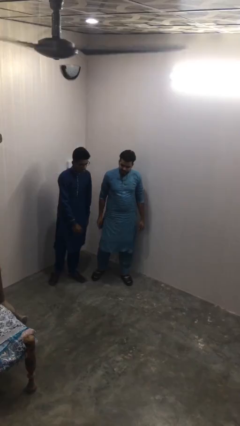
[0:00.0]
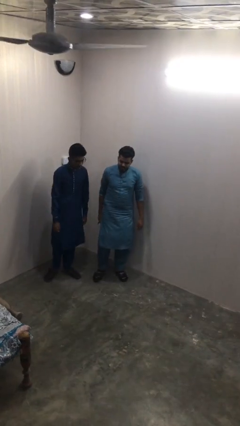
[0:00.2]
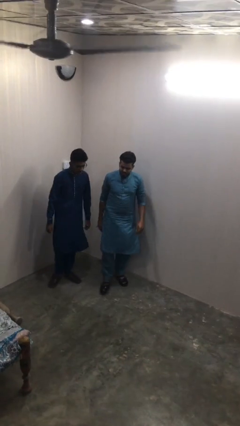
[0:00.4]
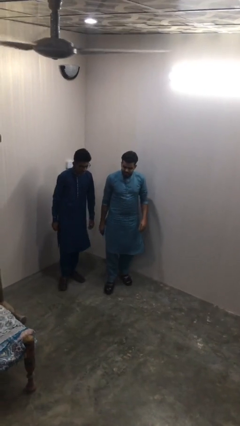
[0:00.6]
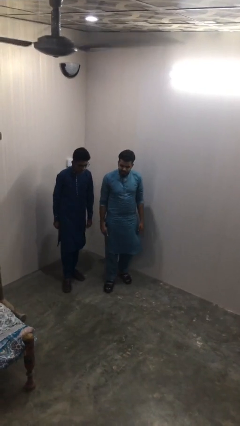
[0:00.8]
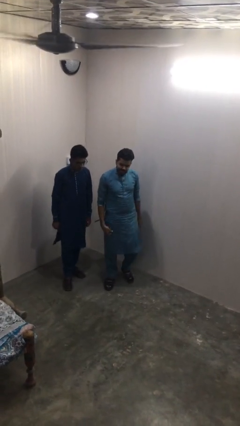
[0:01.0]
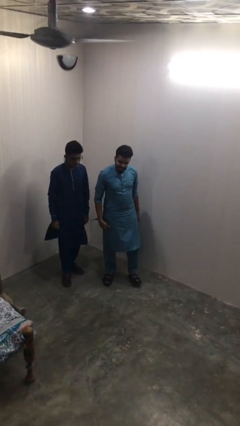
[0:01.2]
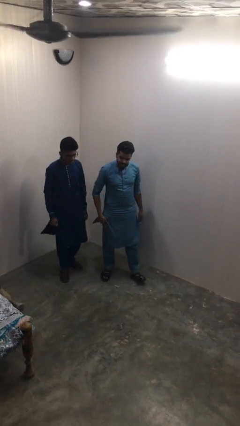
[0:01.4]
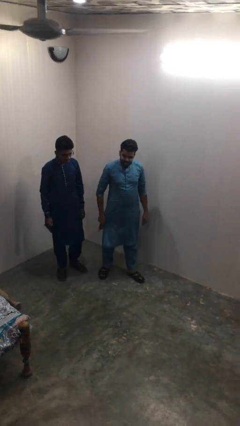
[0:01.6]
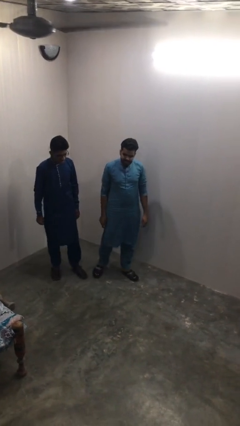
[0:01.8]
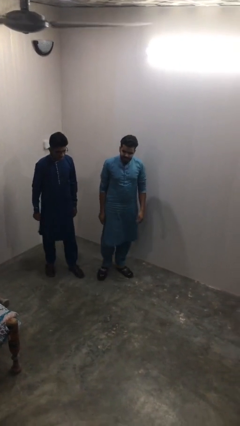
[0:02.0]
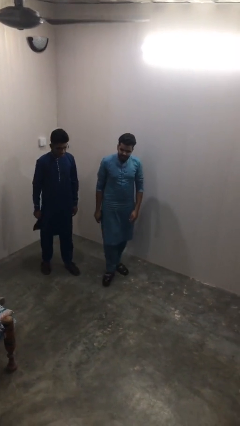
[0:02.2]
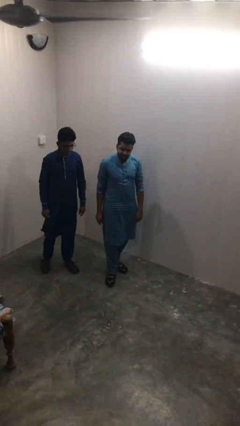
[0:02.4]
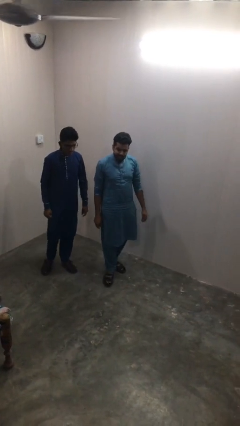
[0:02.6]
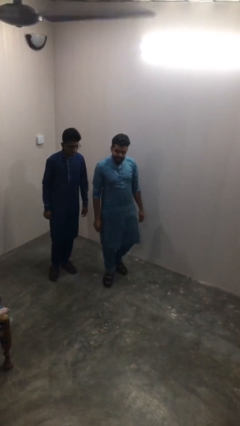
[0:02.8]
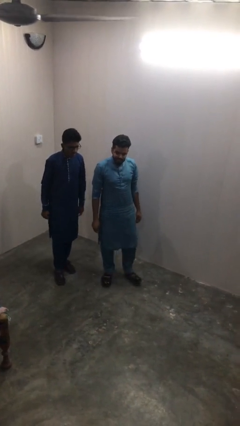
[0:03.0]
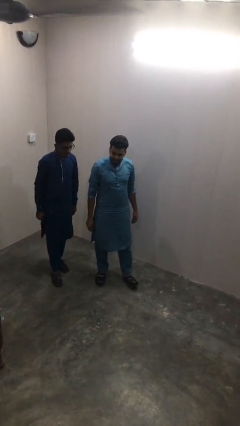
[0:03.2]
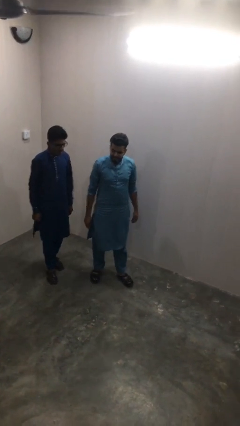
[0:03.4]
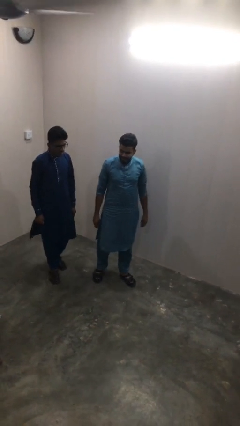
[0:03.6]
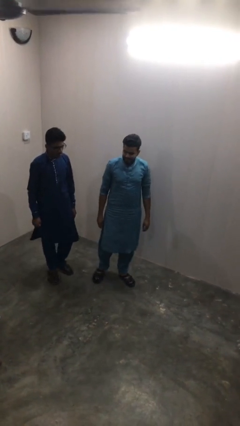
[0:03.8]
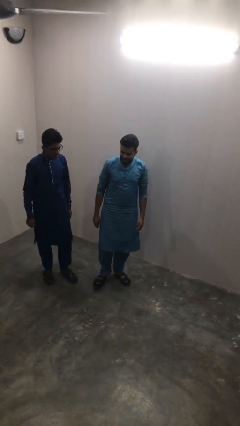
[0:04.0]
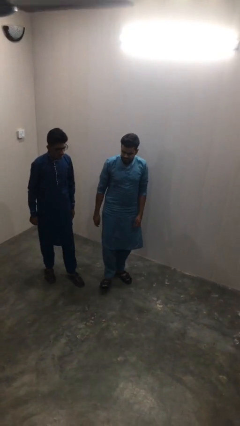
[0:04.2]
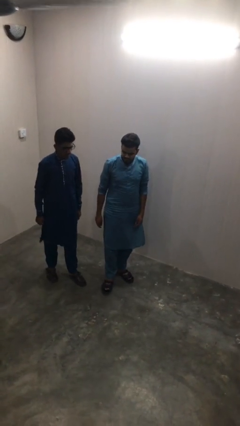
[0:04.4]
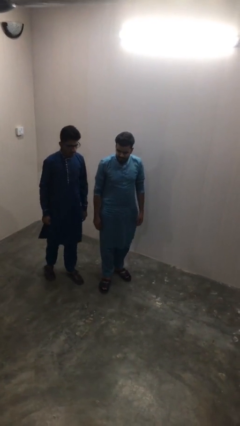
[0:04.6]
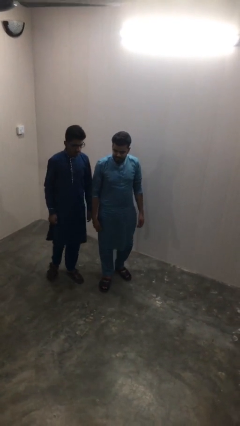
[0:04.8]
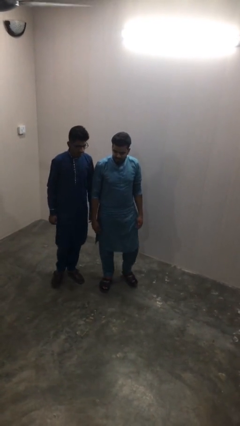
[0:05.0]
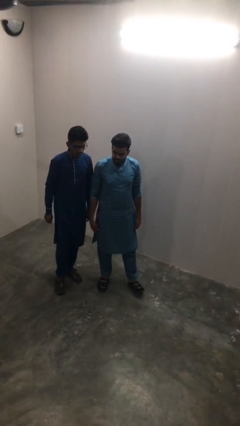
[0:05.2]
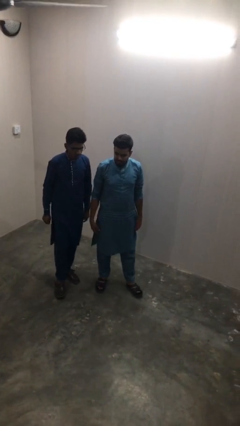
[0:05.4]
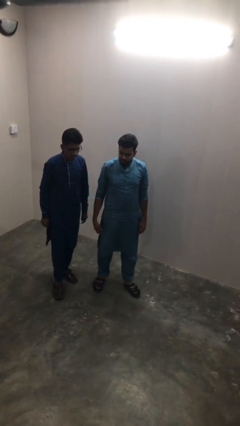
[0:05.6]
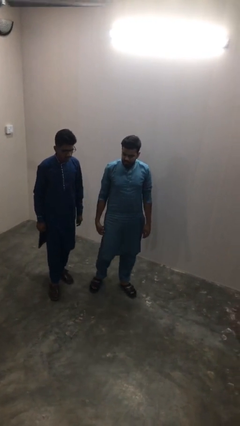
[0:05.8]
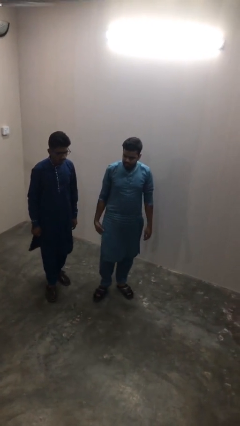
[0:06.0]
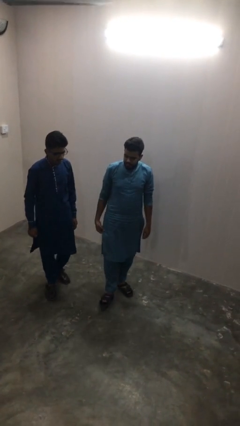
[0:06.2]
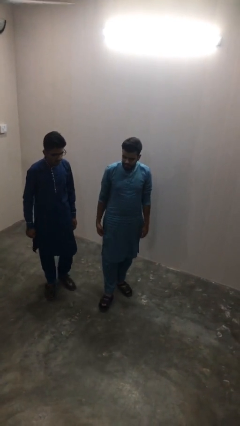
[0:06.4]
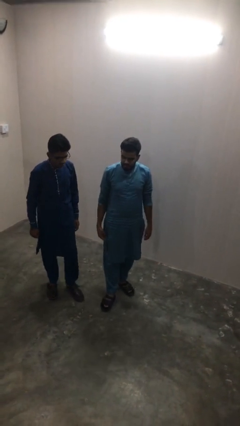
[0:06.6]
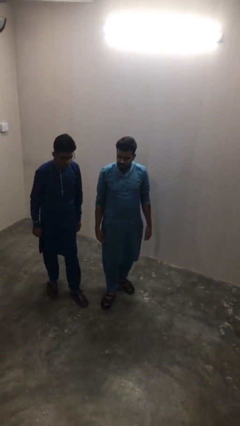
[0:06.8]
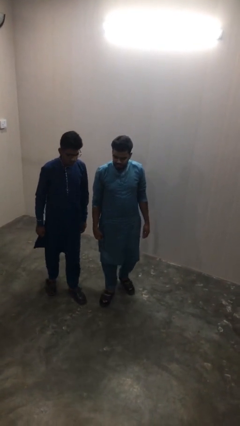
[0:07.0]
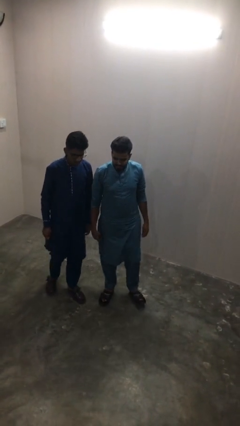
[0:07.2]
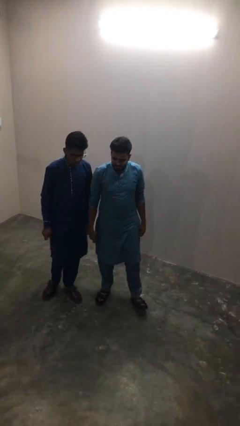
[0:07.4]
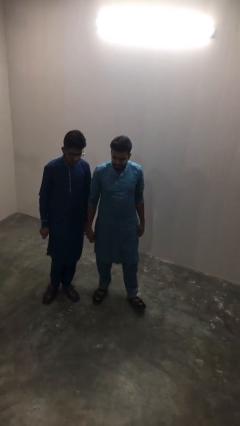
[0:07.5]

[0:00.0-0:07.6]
person talks to person

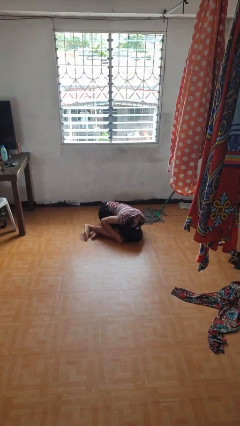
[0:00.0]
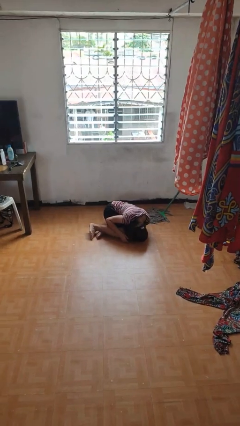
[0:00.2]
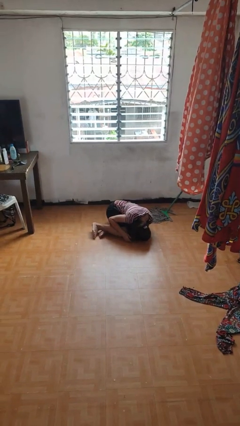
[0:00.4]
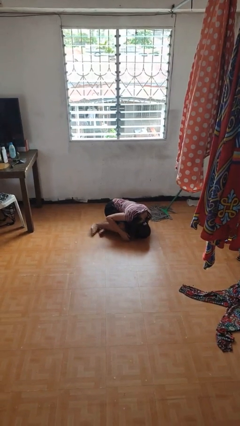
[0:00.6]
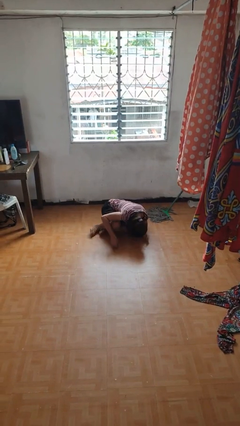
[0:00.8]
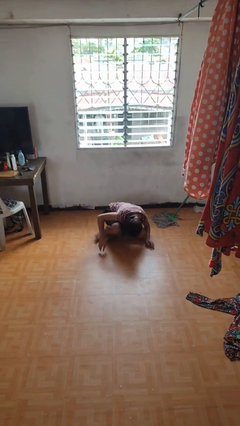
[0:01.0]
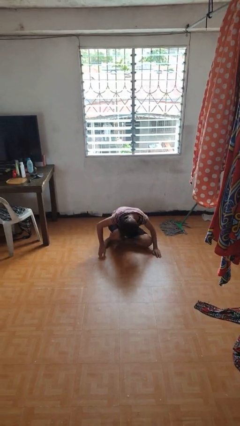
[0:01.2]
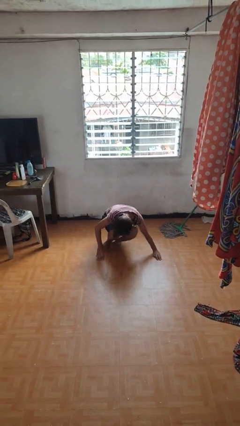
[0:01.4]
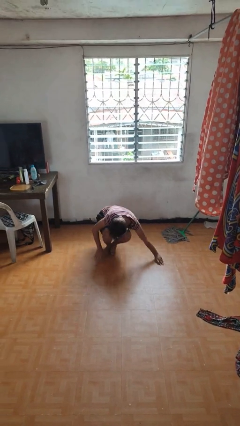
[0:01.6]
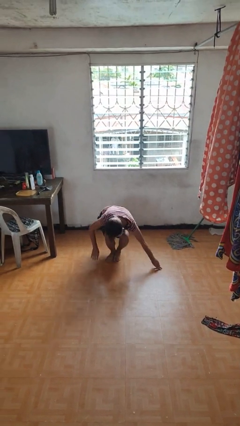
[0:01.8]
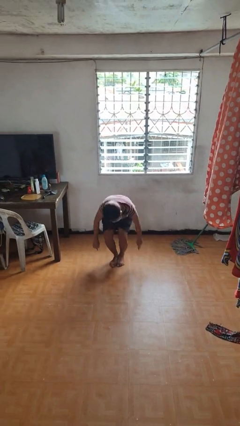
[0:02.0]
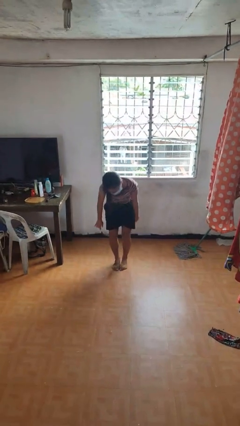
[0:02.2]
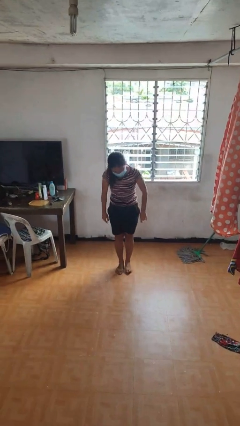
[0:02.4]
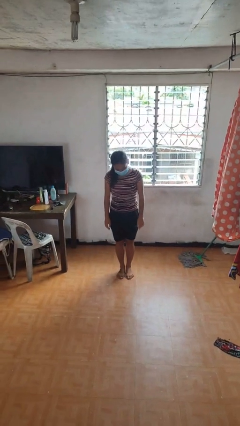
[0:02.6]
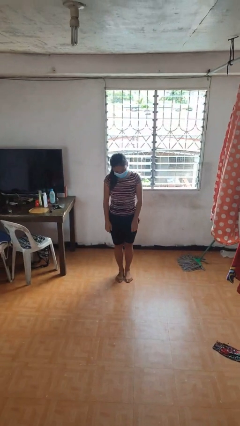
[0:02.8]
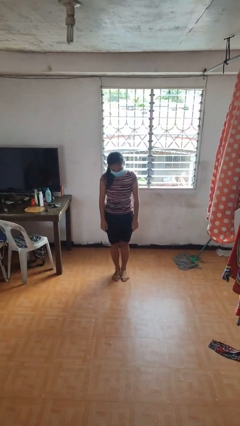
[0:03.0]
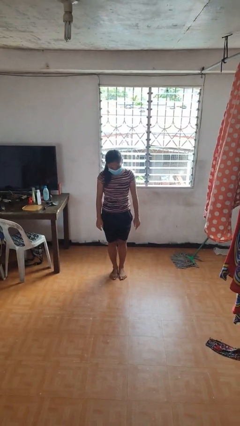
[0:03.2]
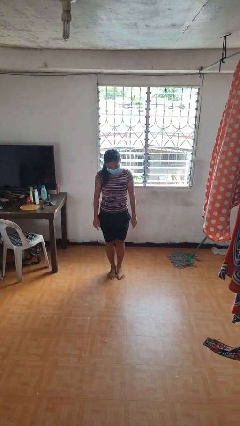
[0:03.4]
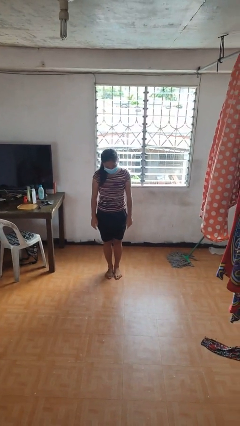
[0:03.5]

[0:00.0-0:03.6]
person stands up from floor

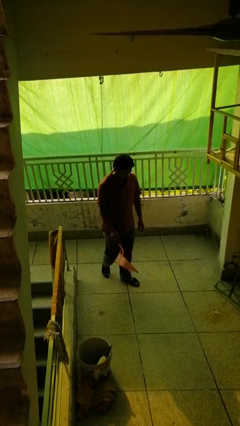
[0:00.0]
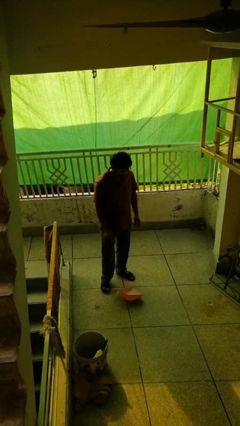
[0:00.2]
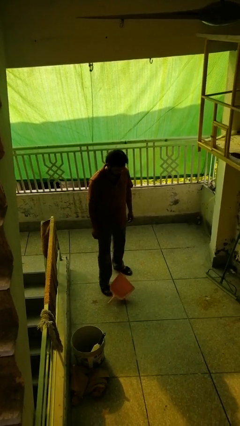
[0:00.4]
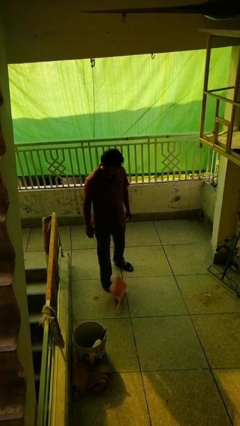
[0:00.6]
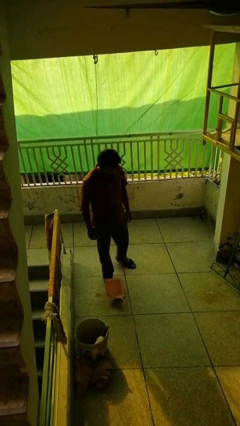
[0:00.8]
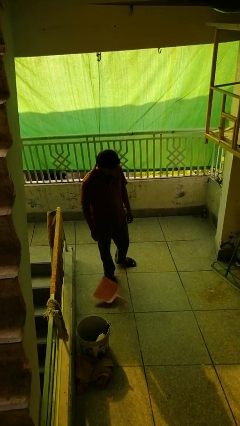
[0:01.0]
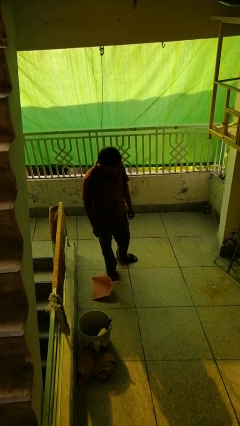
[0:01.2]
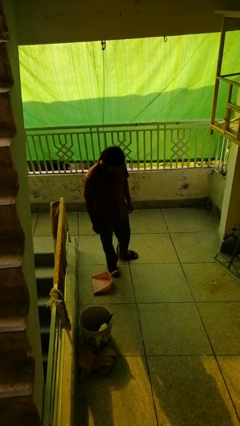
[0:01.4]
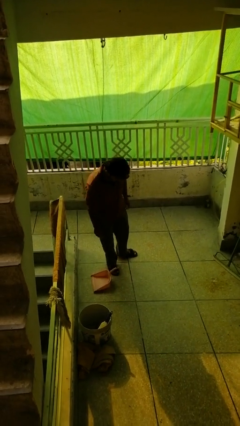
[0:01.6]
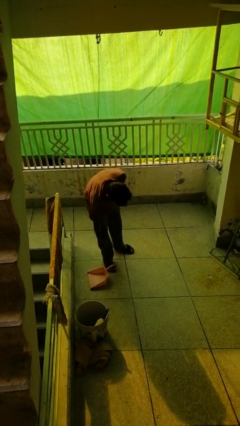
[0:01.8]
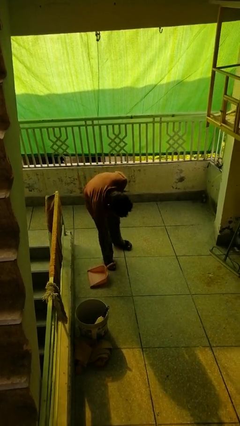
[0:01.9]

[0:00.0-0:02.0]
person drops object

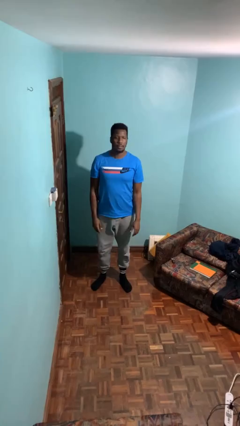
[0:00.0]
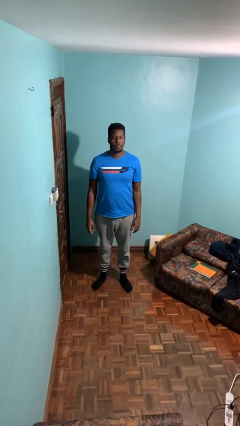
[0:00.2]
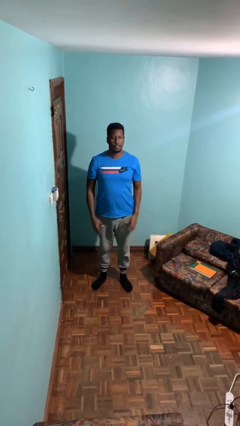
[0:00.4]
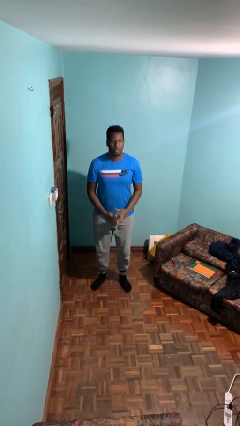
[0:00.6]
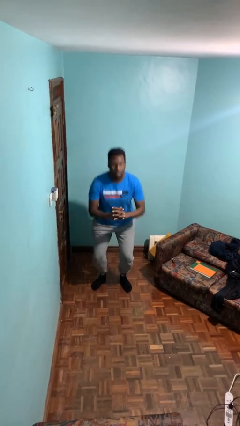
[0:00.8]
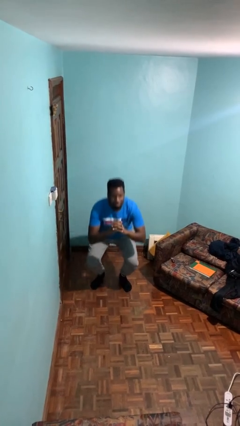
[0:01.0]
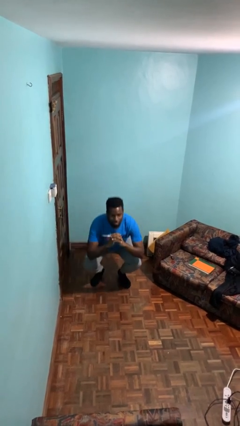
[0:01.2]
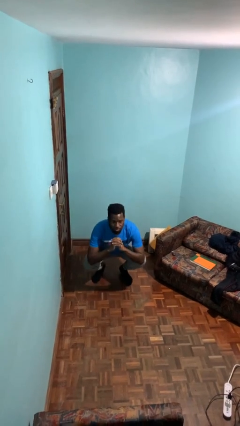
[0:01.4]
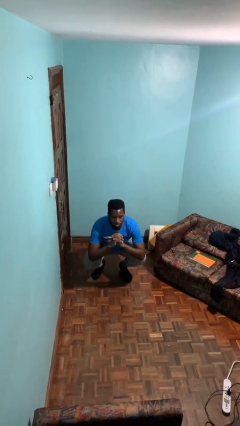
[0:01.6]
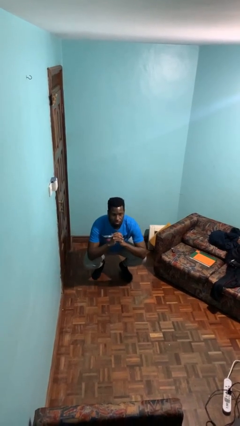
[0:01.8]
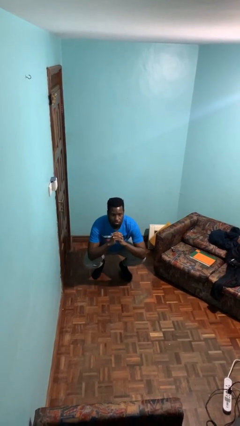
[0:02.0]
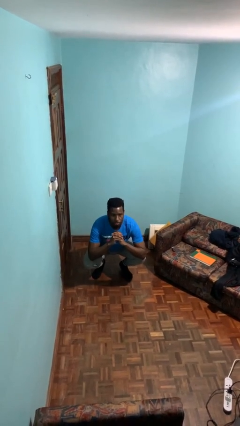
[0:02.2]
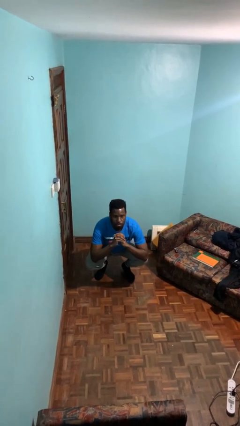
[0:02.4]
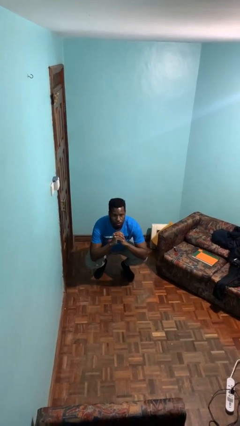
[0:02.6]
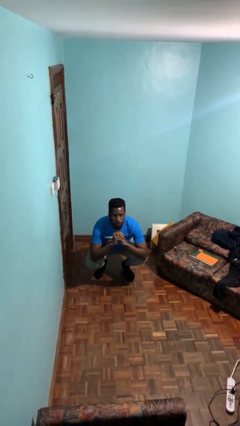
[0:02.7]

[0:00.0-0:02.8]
person squats

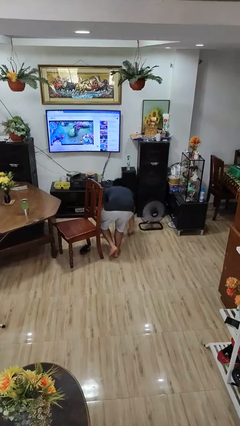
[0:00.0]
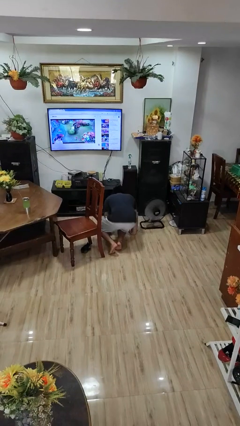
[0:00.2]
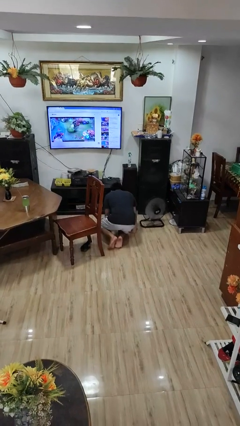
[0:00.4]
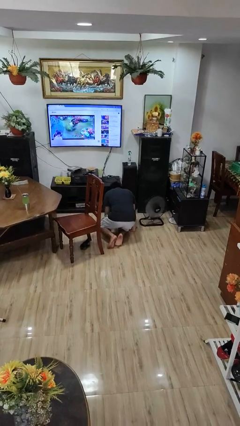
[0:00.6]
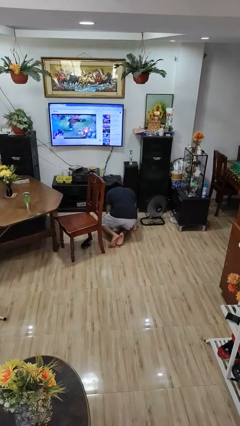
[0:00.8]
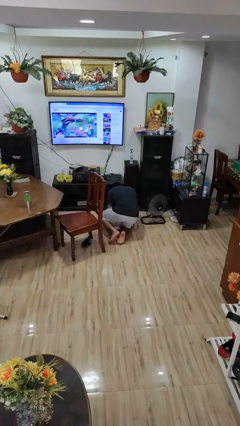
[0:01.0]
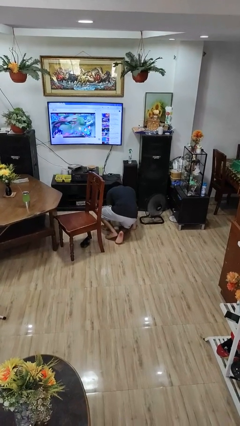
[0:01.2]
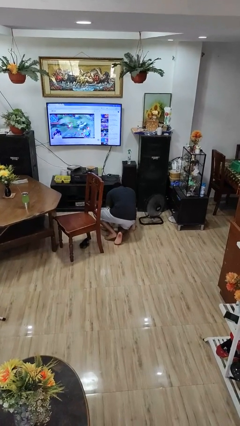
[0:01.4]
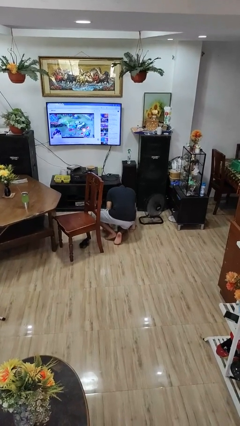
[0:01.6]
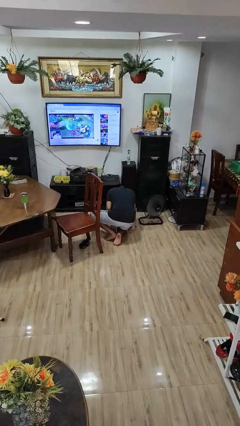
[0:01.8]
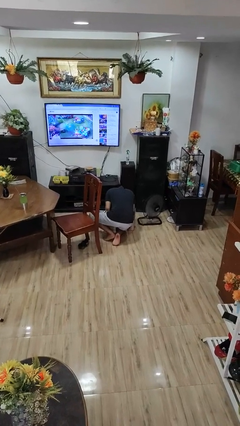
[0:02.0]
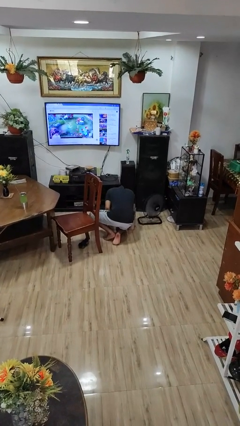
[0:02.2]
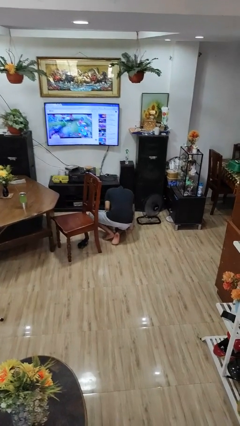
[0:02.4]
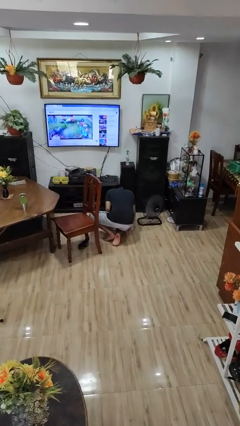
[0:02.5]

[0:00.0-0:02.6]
person lies down on floor
